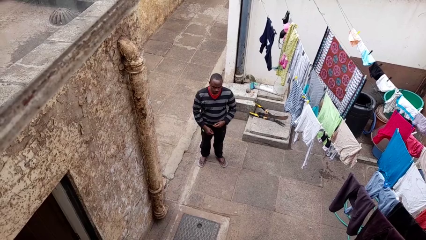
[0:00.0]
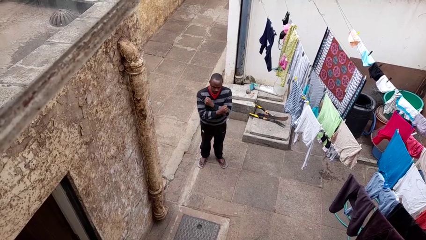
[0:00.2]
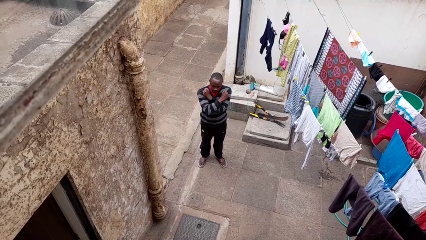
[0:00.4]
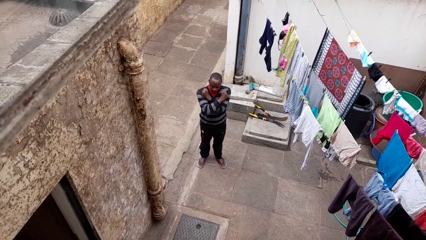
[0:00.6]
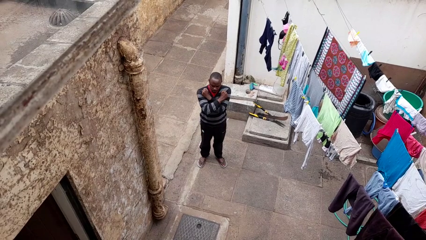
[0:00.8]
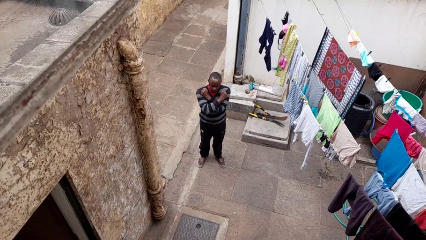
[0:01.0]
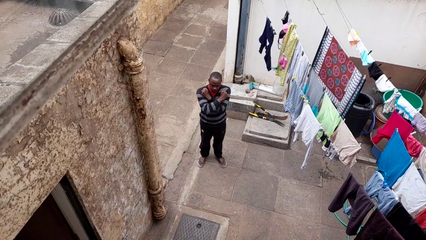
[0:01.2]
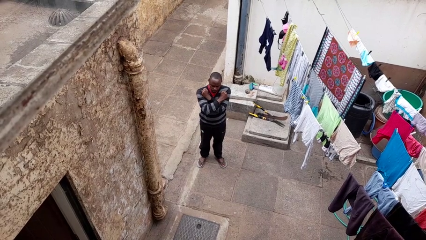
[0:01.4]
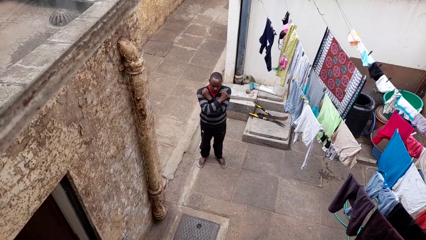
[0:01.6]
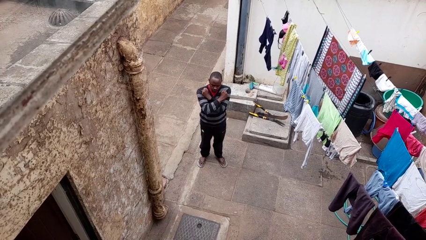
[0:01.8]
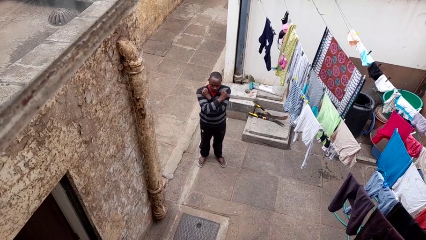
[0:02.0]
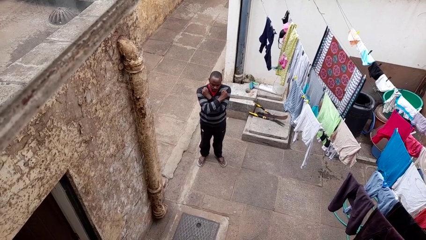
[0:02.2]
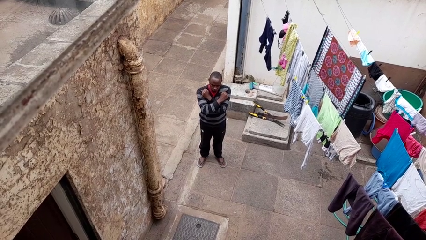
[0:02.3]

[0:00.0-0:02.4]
person gestures arms x

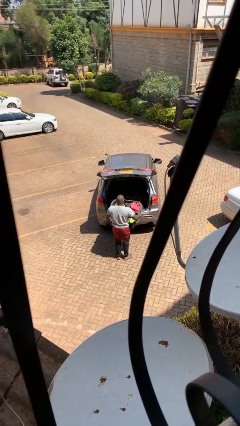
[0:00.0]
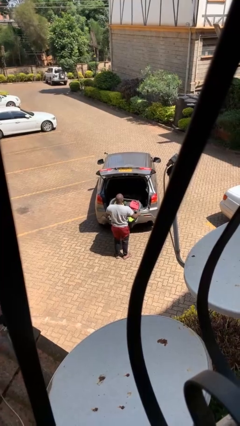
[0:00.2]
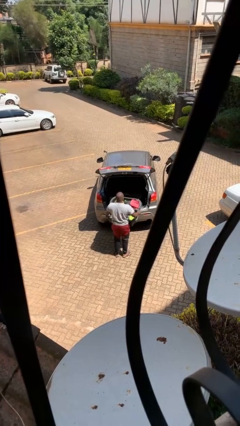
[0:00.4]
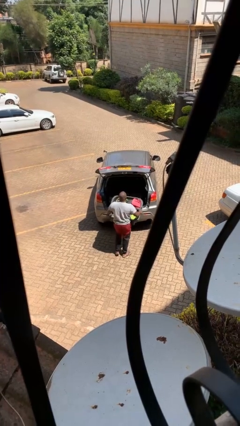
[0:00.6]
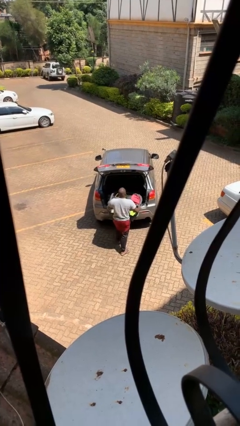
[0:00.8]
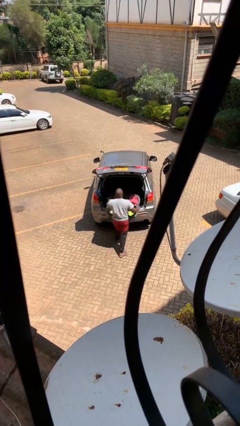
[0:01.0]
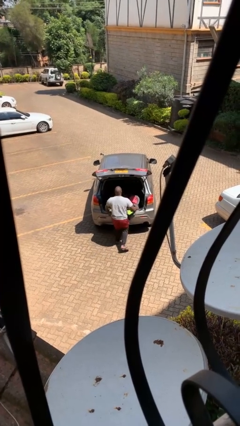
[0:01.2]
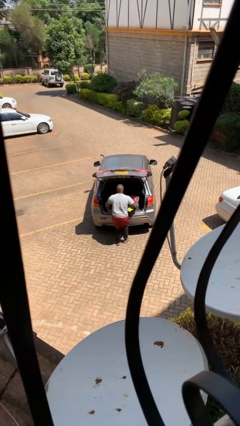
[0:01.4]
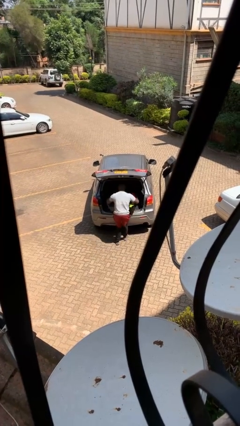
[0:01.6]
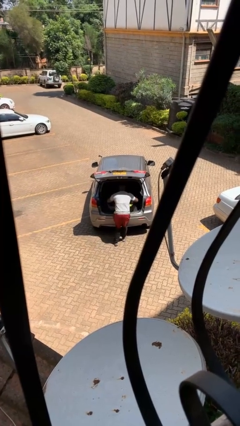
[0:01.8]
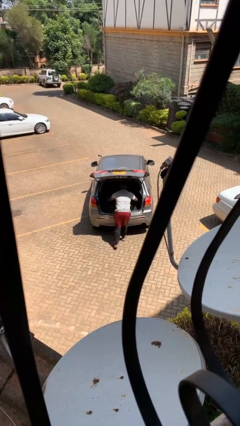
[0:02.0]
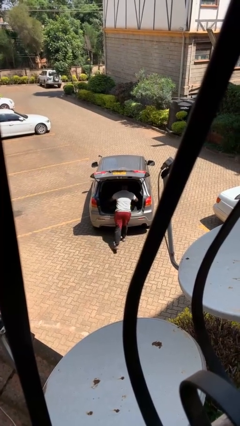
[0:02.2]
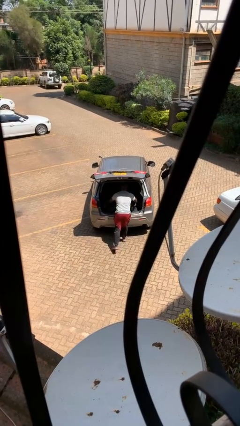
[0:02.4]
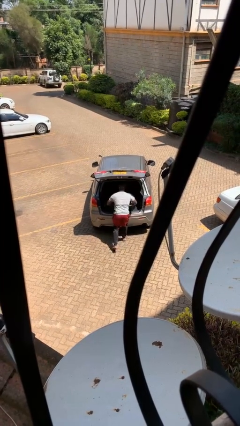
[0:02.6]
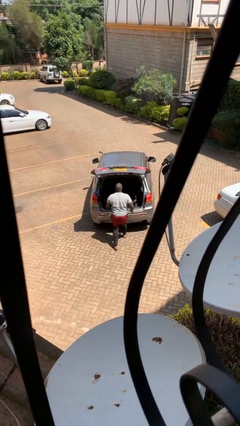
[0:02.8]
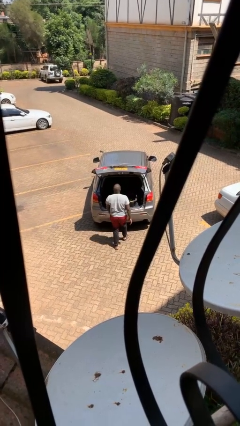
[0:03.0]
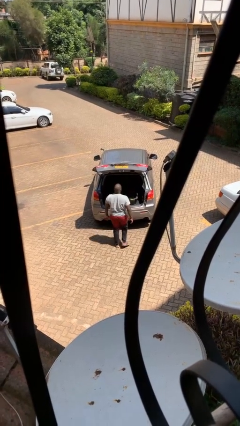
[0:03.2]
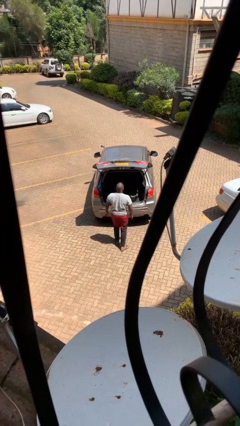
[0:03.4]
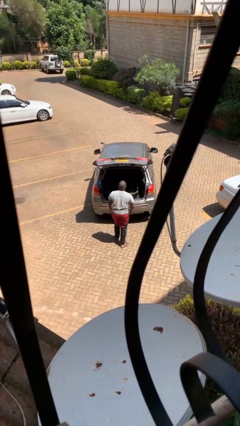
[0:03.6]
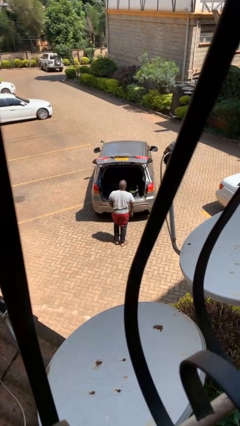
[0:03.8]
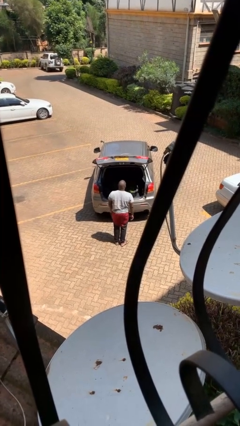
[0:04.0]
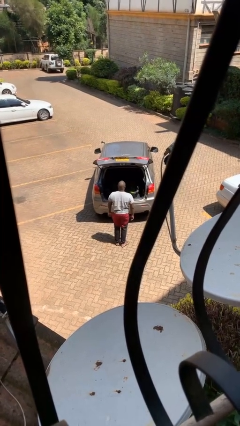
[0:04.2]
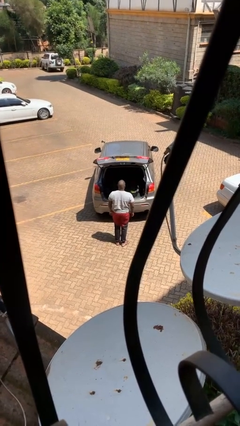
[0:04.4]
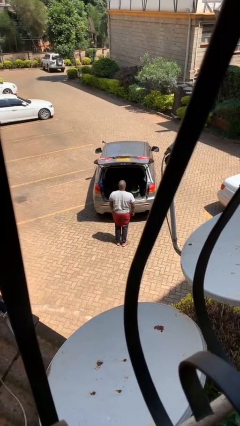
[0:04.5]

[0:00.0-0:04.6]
person loads car

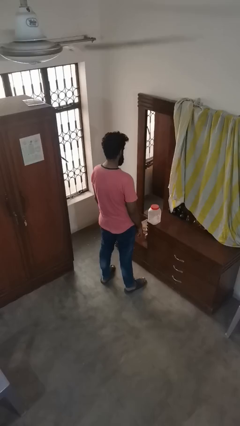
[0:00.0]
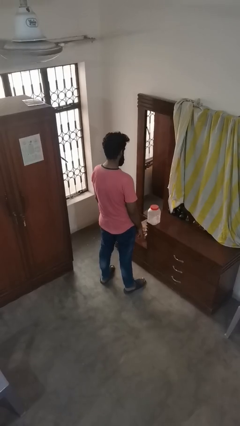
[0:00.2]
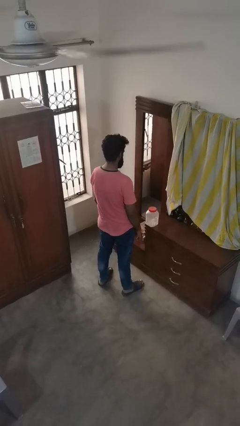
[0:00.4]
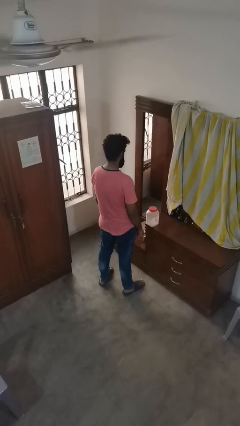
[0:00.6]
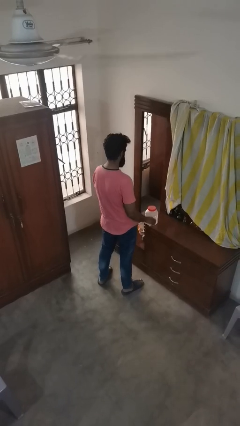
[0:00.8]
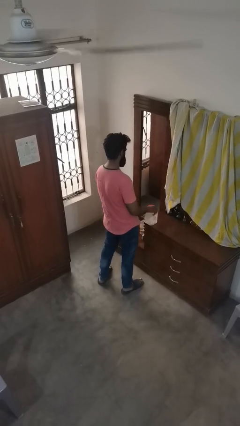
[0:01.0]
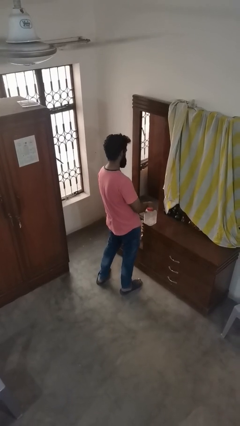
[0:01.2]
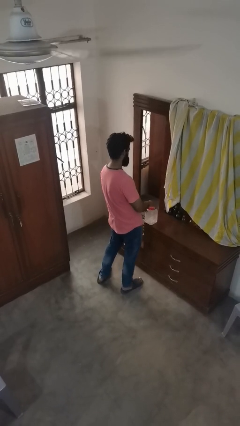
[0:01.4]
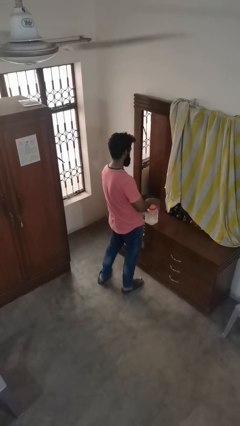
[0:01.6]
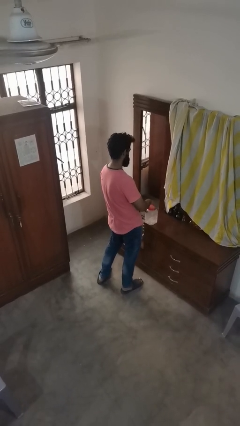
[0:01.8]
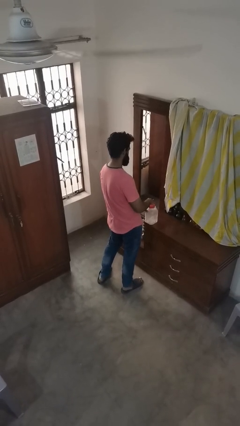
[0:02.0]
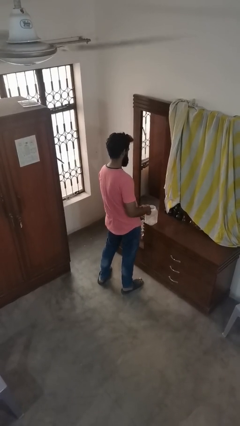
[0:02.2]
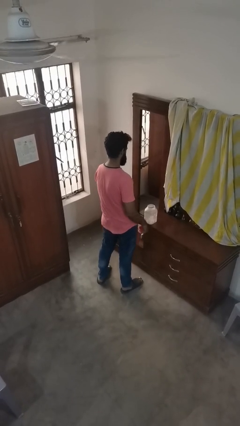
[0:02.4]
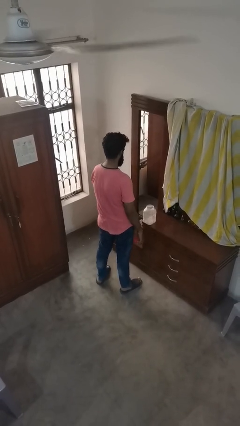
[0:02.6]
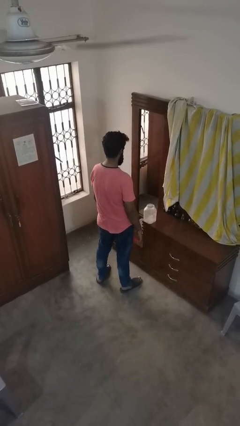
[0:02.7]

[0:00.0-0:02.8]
person opens jar

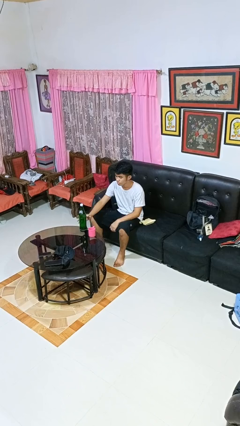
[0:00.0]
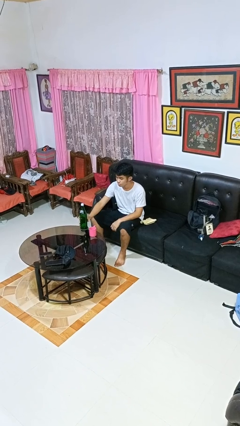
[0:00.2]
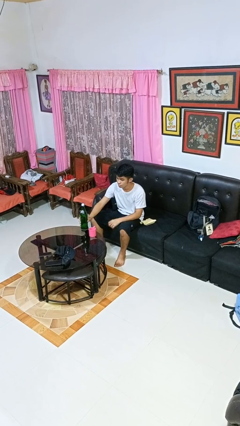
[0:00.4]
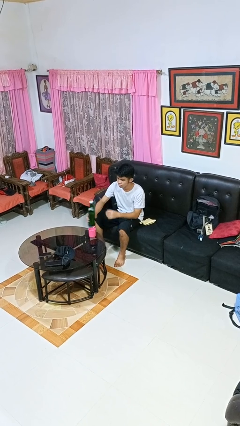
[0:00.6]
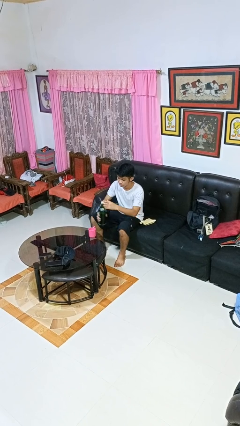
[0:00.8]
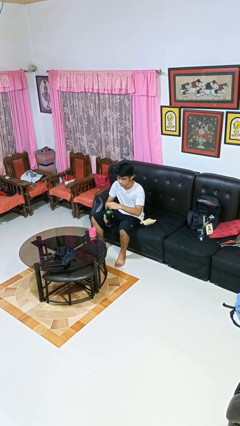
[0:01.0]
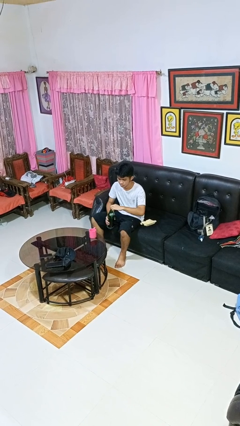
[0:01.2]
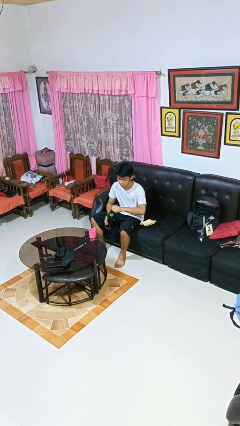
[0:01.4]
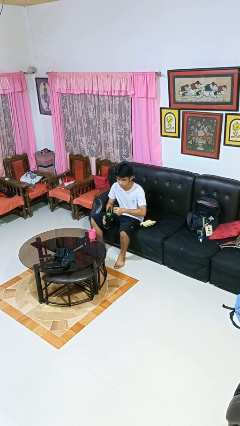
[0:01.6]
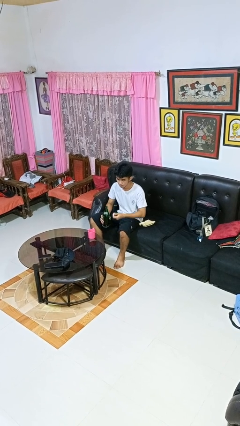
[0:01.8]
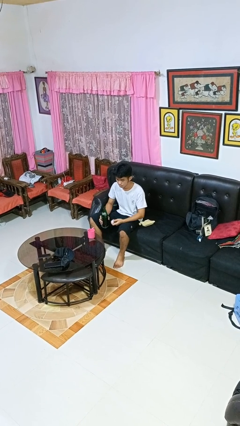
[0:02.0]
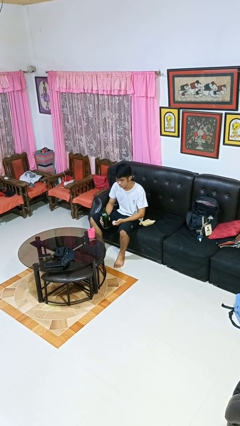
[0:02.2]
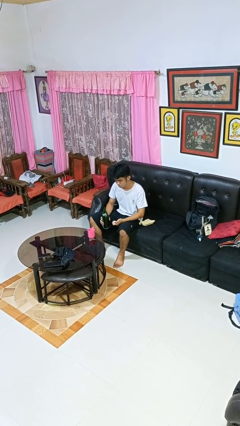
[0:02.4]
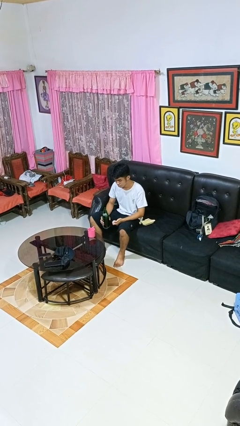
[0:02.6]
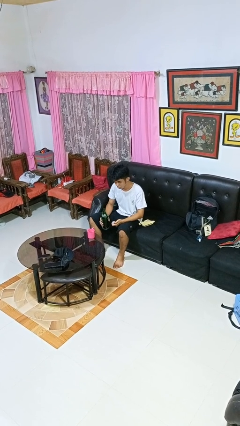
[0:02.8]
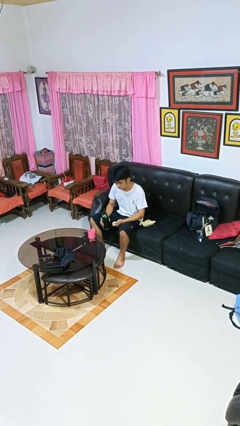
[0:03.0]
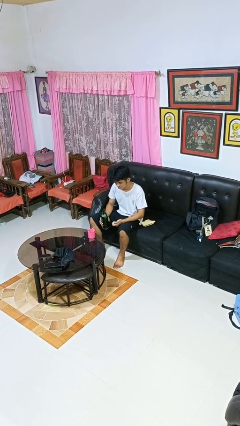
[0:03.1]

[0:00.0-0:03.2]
person unscrews lid from bottle

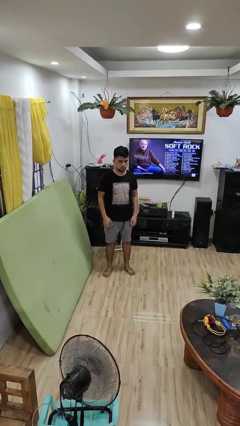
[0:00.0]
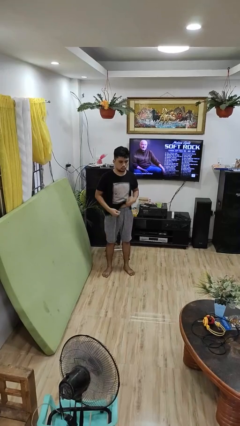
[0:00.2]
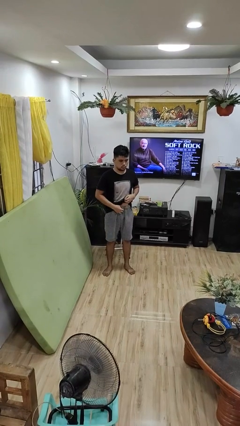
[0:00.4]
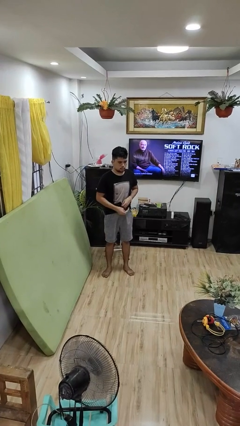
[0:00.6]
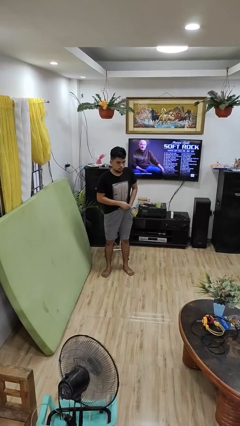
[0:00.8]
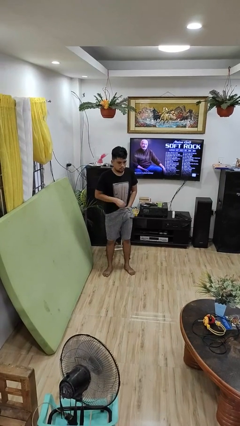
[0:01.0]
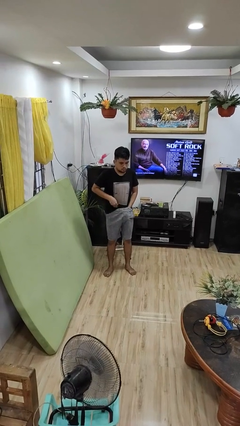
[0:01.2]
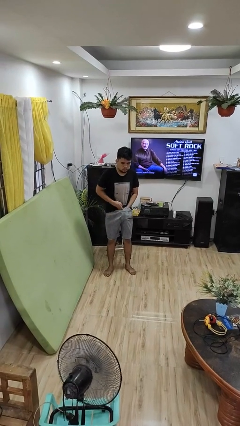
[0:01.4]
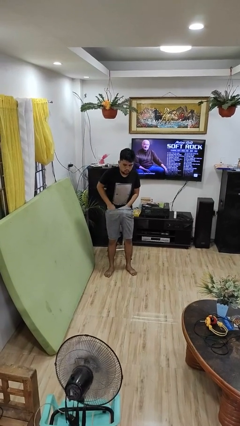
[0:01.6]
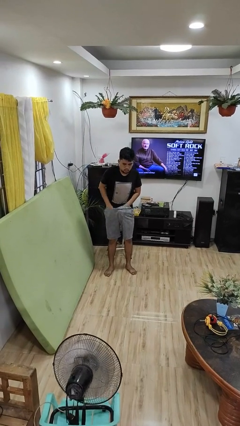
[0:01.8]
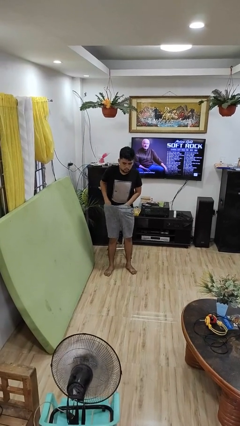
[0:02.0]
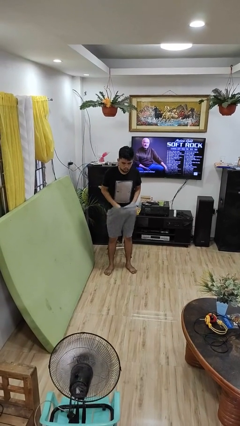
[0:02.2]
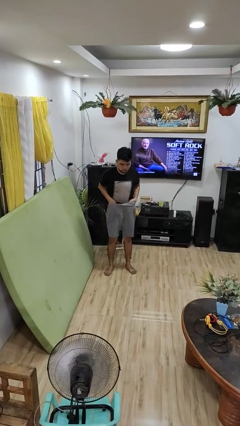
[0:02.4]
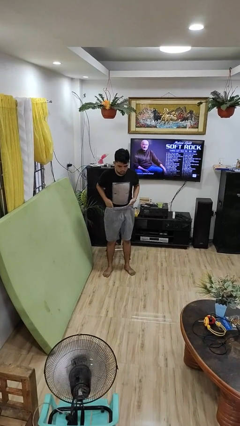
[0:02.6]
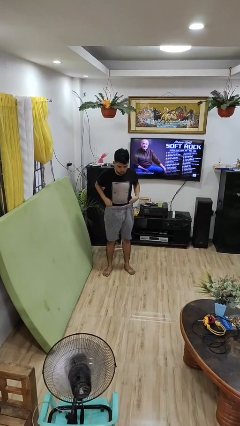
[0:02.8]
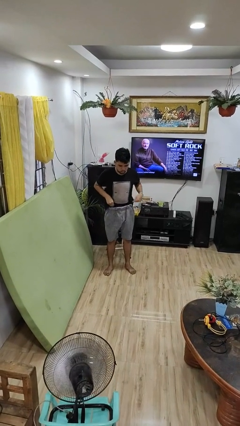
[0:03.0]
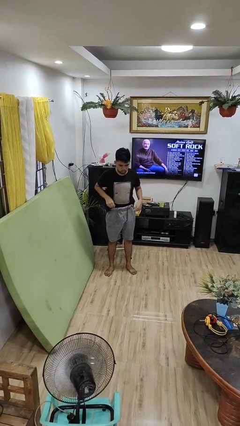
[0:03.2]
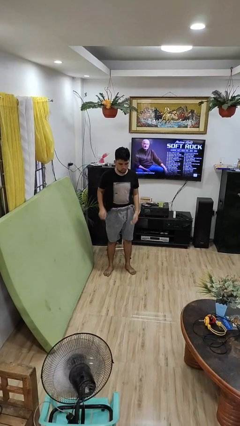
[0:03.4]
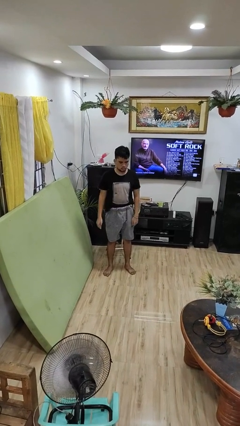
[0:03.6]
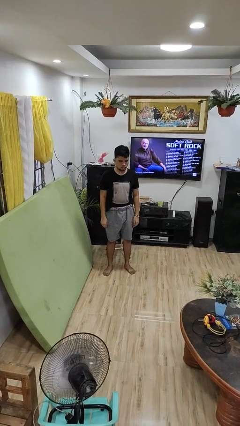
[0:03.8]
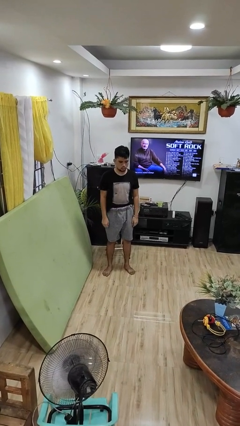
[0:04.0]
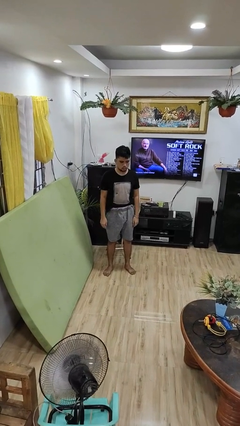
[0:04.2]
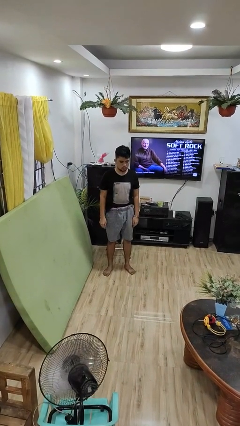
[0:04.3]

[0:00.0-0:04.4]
person tucks in shirt
